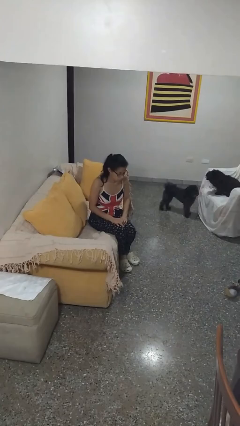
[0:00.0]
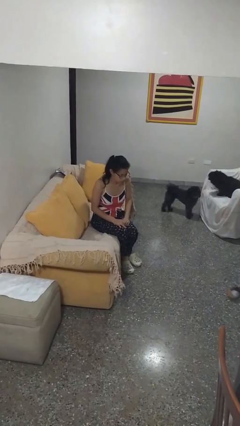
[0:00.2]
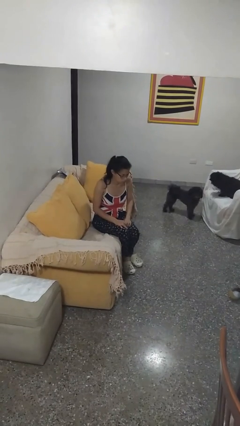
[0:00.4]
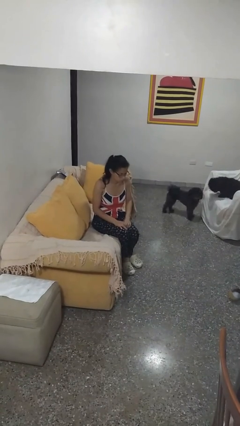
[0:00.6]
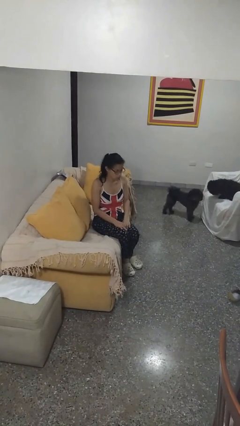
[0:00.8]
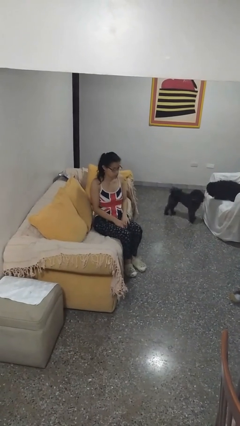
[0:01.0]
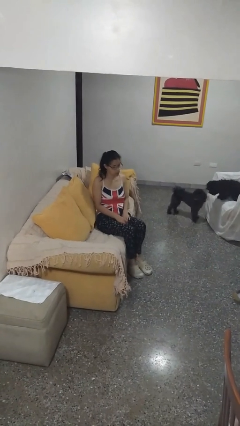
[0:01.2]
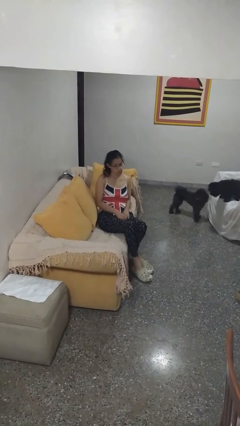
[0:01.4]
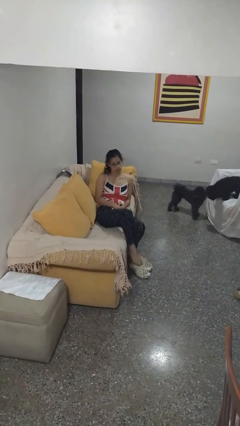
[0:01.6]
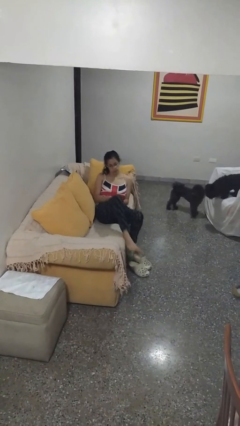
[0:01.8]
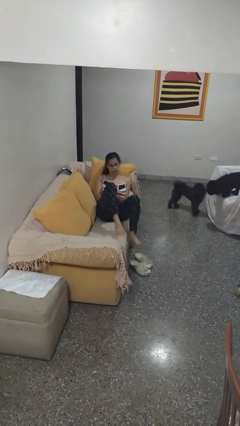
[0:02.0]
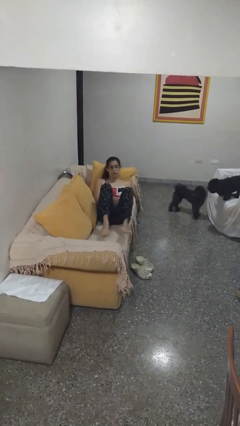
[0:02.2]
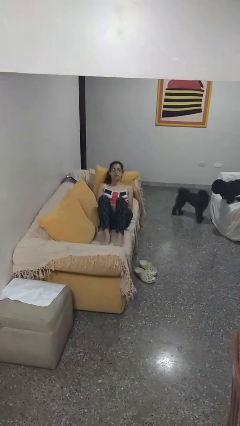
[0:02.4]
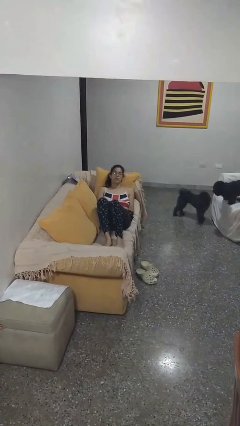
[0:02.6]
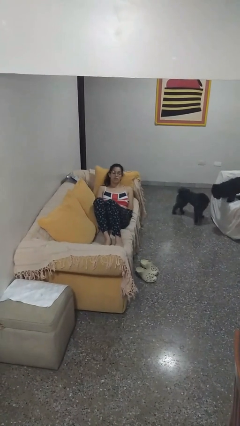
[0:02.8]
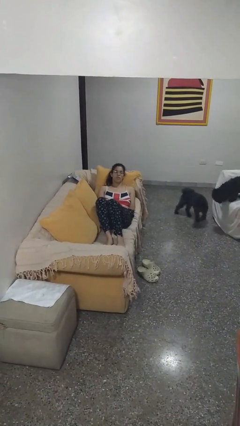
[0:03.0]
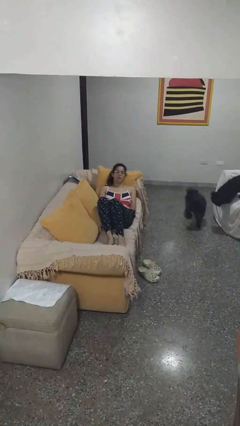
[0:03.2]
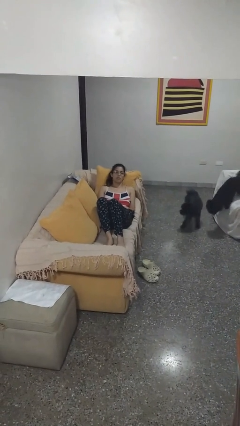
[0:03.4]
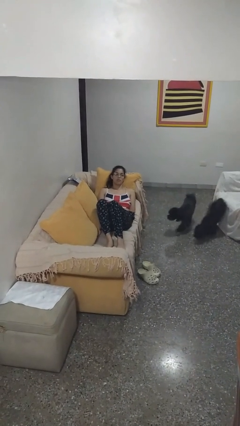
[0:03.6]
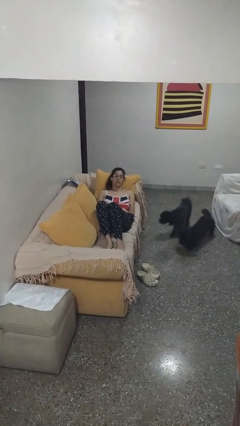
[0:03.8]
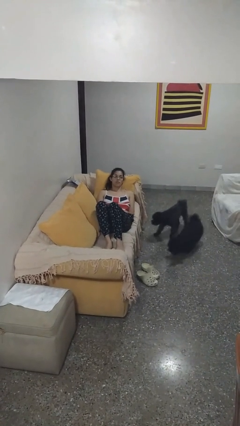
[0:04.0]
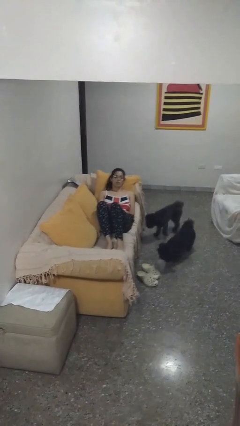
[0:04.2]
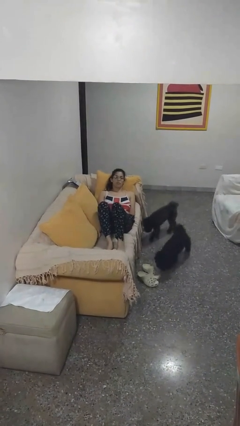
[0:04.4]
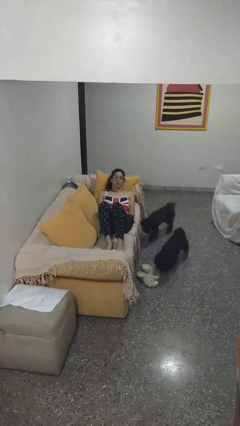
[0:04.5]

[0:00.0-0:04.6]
person lies down on couch

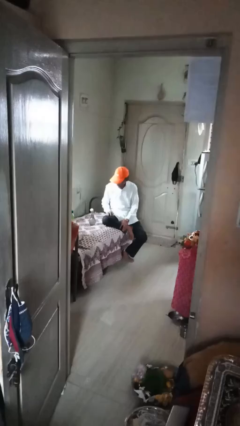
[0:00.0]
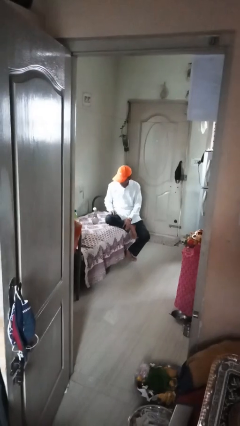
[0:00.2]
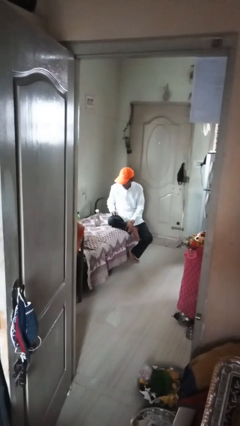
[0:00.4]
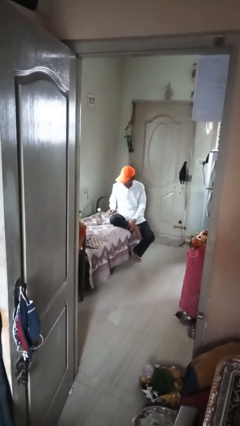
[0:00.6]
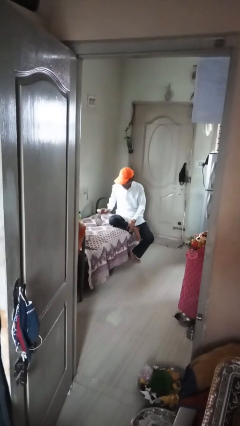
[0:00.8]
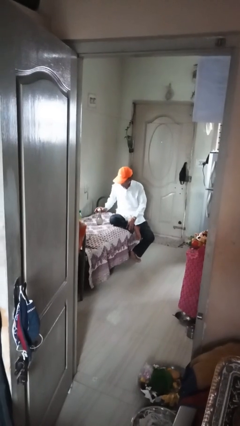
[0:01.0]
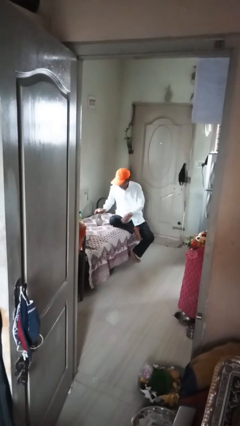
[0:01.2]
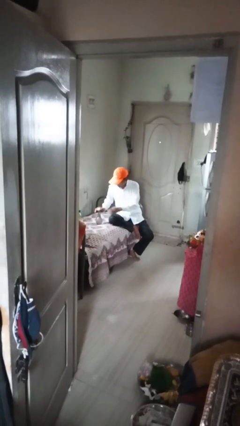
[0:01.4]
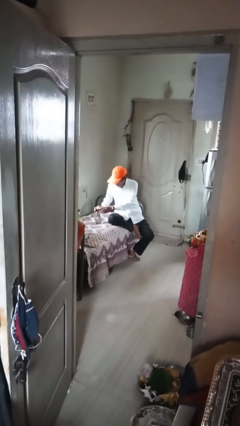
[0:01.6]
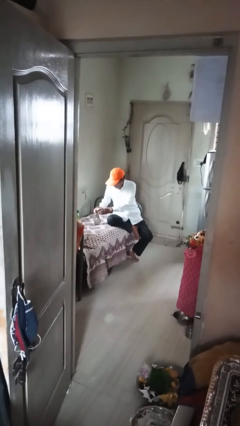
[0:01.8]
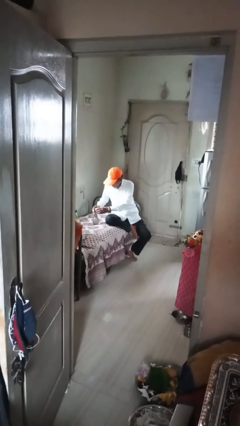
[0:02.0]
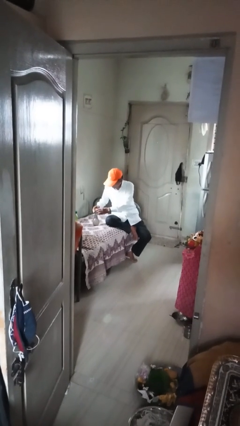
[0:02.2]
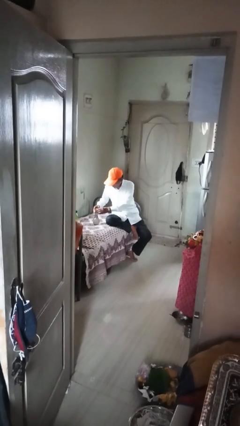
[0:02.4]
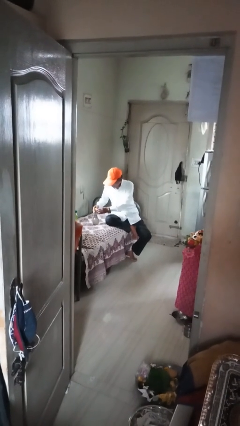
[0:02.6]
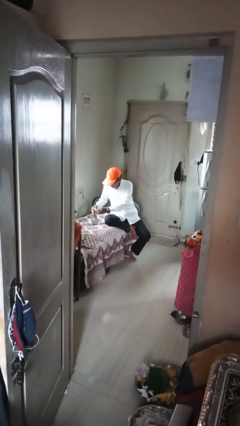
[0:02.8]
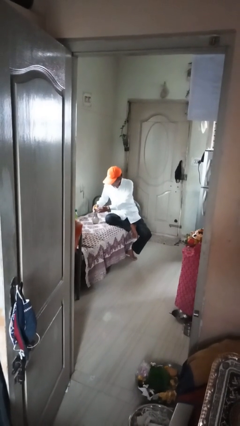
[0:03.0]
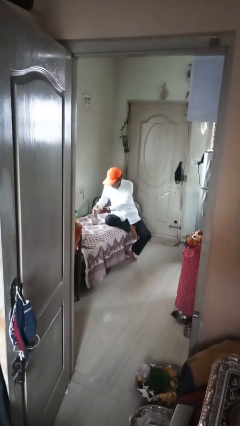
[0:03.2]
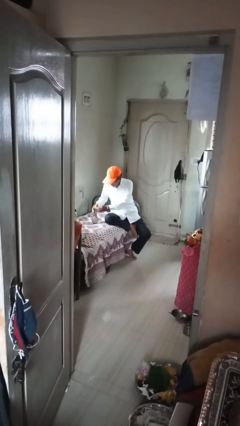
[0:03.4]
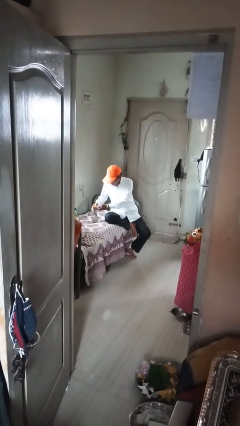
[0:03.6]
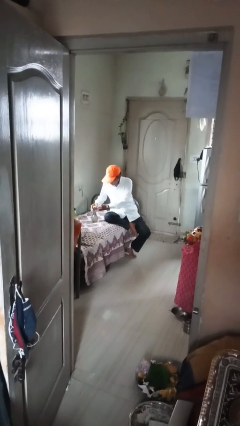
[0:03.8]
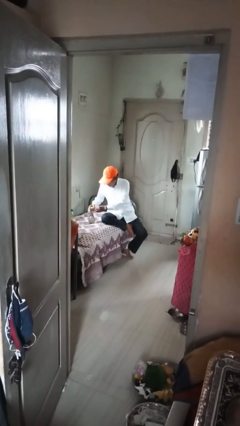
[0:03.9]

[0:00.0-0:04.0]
person arranges flowers in vase

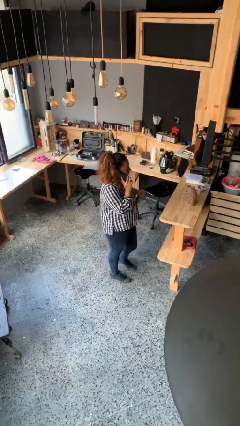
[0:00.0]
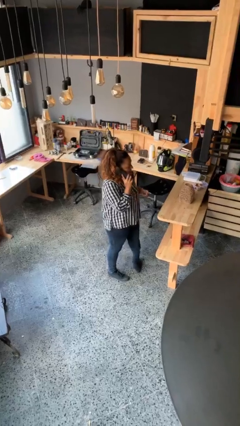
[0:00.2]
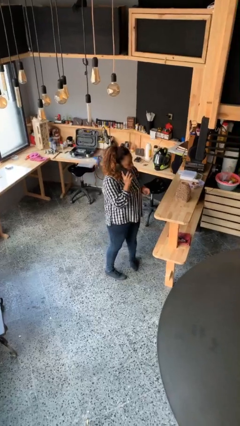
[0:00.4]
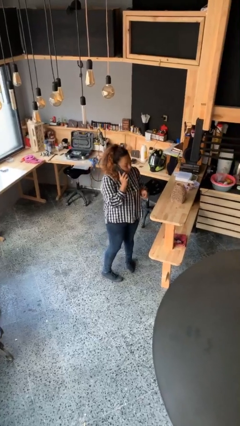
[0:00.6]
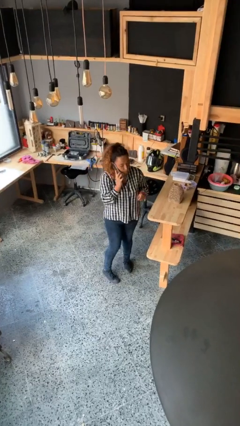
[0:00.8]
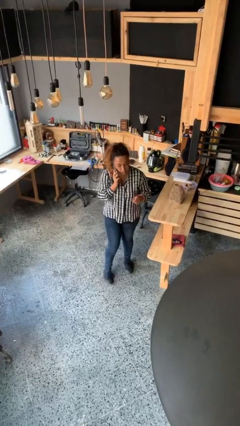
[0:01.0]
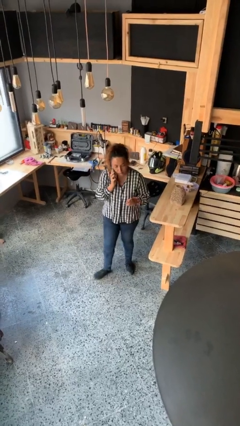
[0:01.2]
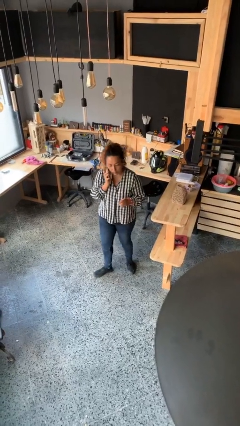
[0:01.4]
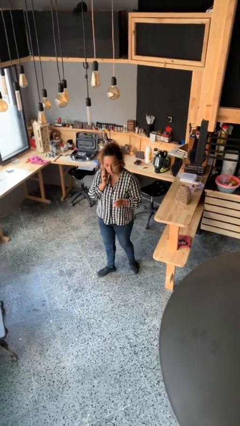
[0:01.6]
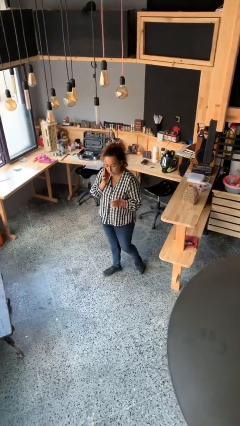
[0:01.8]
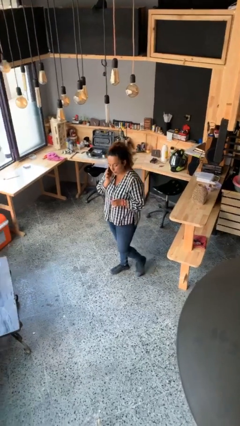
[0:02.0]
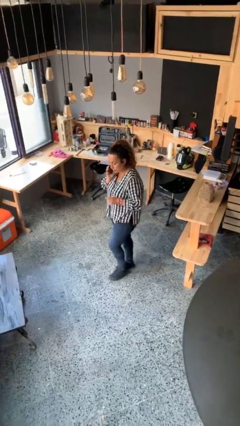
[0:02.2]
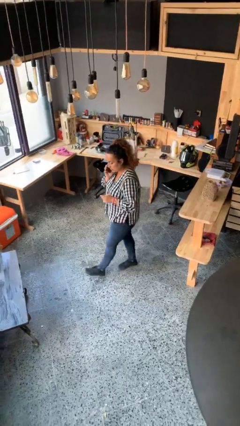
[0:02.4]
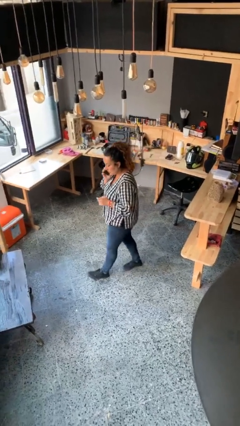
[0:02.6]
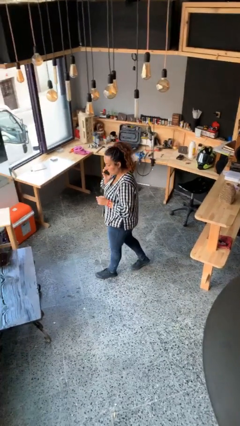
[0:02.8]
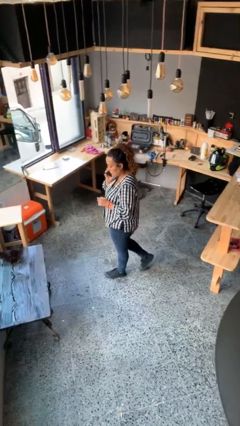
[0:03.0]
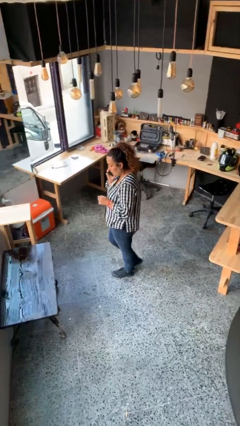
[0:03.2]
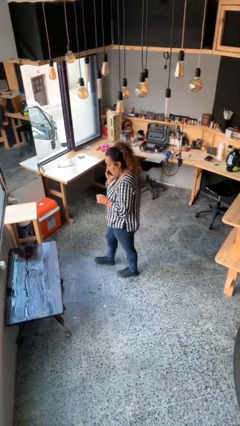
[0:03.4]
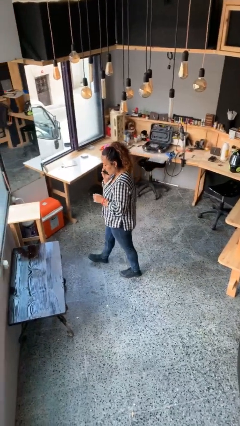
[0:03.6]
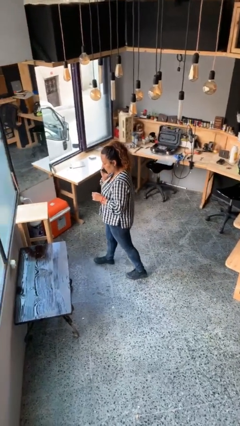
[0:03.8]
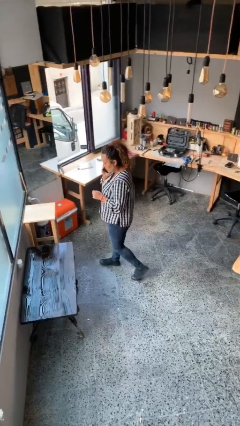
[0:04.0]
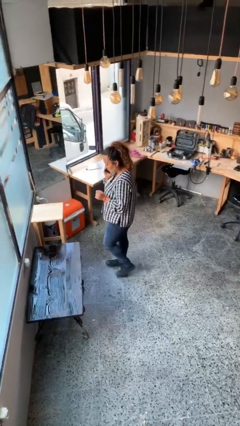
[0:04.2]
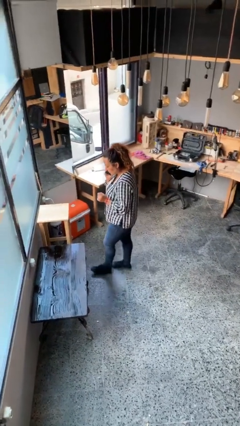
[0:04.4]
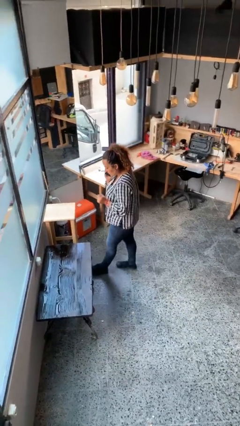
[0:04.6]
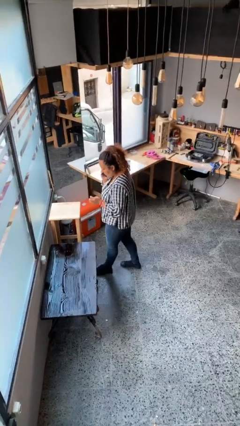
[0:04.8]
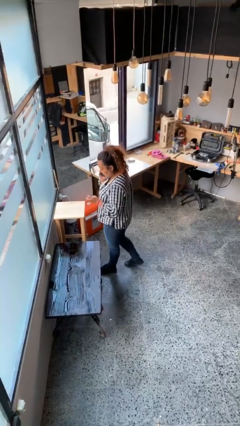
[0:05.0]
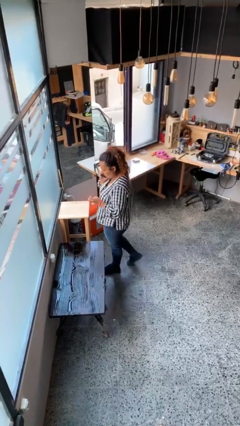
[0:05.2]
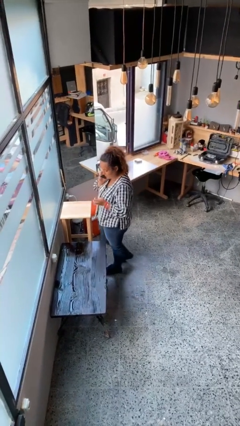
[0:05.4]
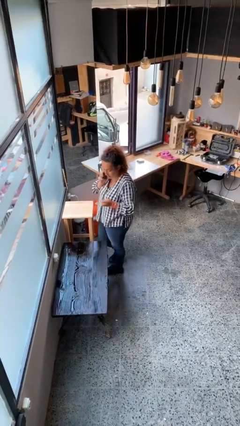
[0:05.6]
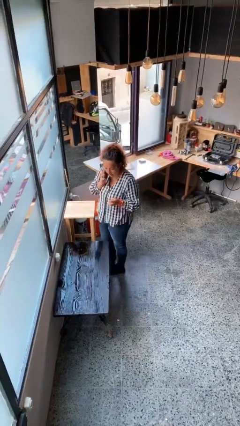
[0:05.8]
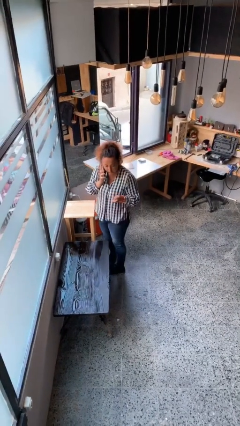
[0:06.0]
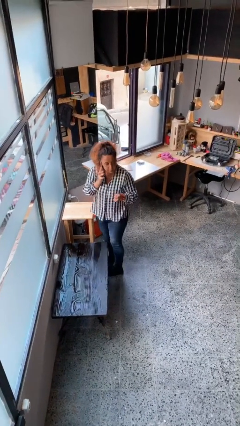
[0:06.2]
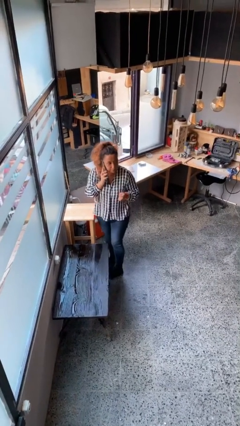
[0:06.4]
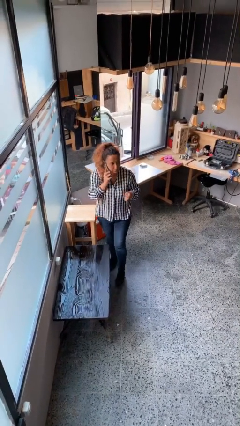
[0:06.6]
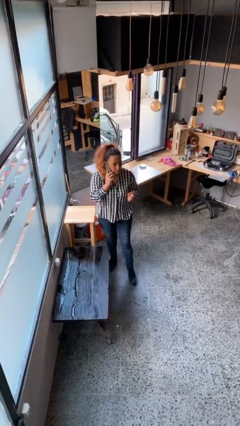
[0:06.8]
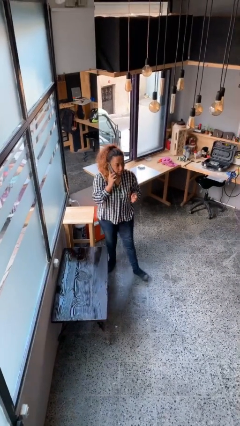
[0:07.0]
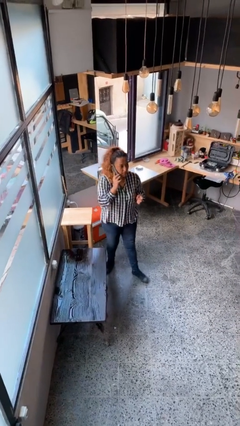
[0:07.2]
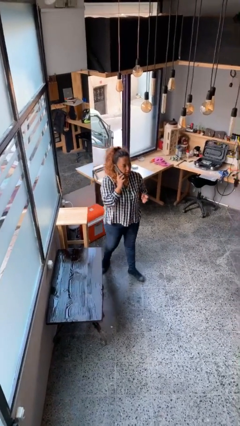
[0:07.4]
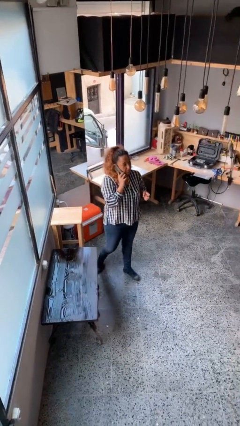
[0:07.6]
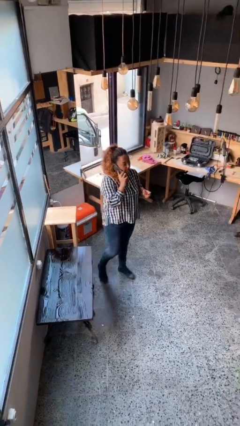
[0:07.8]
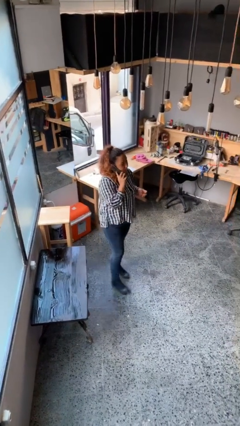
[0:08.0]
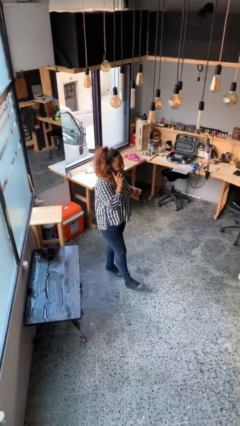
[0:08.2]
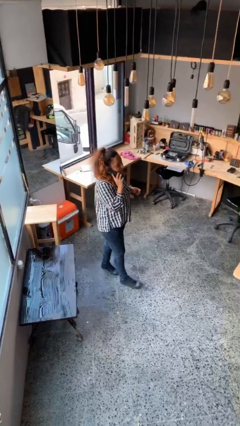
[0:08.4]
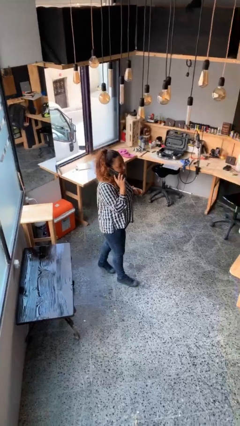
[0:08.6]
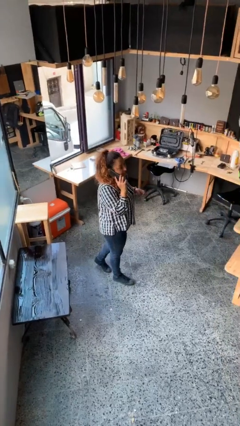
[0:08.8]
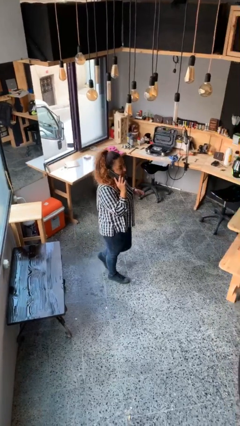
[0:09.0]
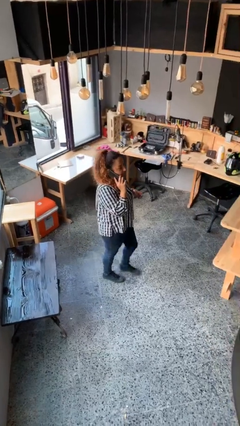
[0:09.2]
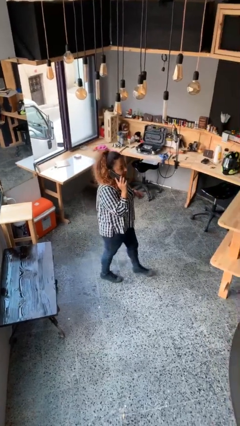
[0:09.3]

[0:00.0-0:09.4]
person talks on phone

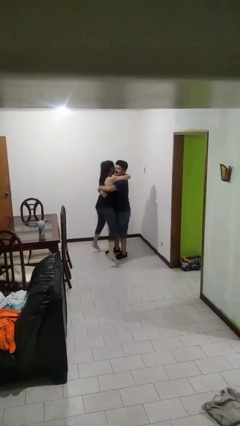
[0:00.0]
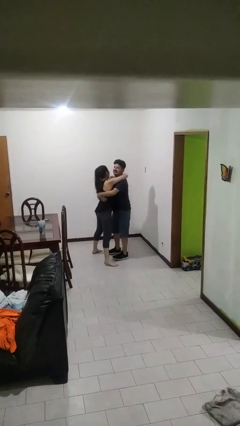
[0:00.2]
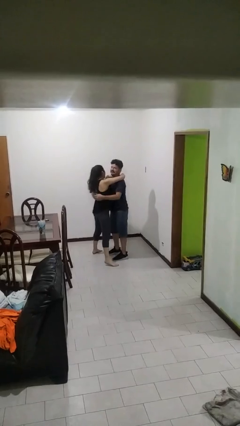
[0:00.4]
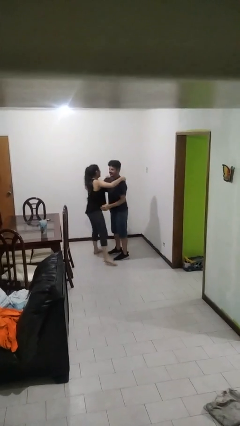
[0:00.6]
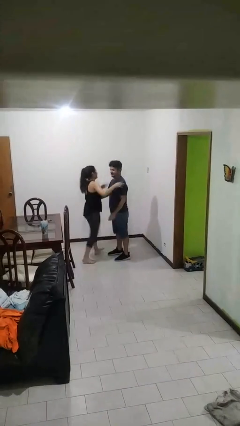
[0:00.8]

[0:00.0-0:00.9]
person puts down person
